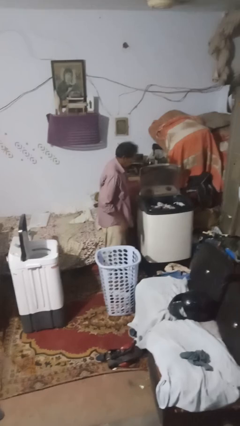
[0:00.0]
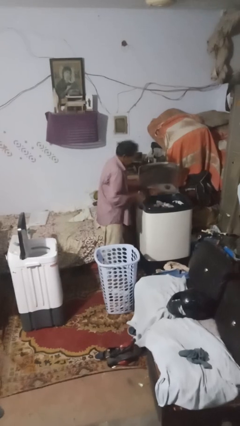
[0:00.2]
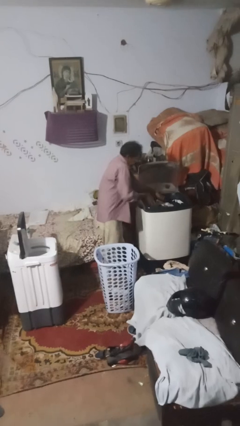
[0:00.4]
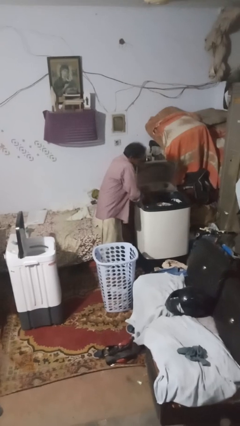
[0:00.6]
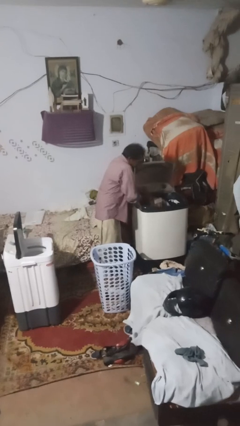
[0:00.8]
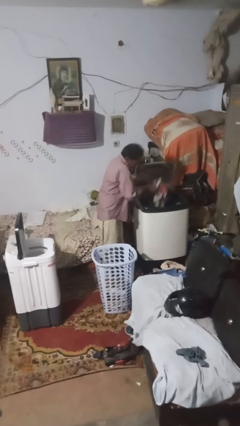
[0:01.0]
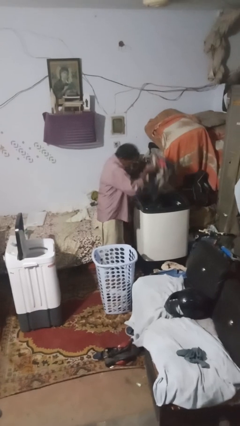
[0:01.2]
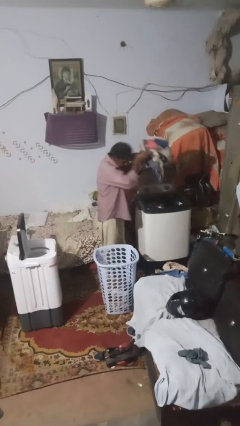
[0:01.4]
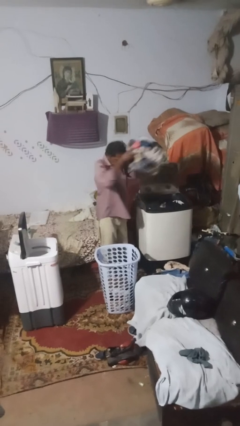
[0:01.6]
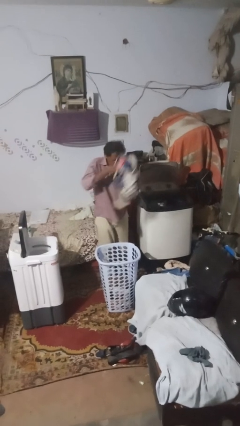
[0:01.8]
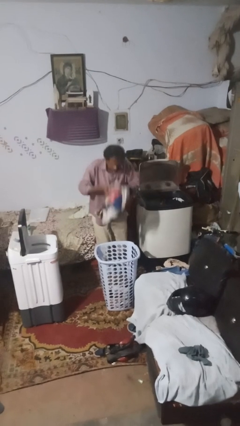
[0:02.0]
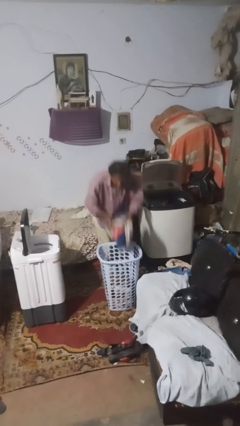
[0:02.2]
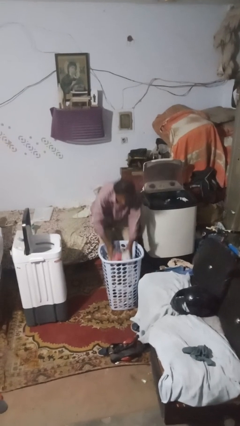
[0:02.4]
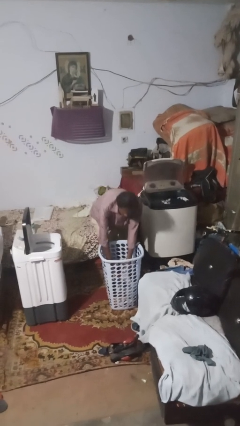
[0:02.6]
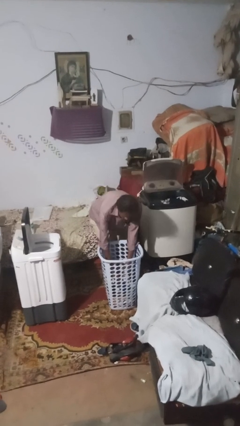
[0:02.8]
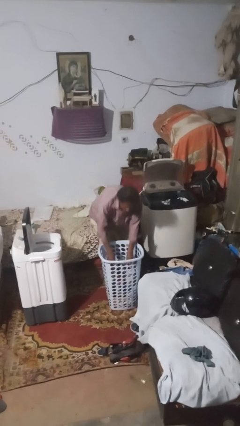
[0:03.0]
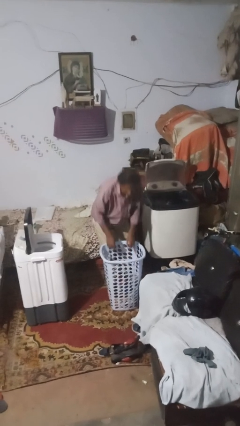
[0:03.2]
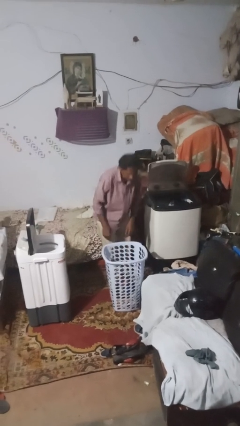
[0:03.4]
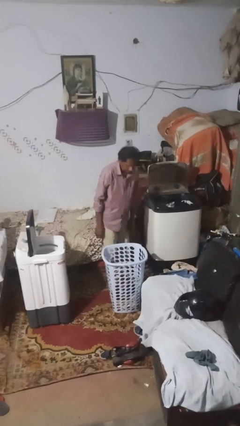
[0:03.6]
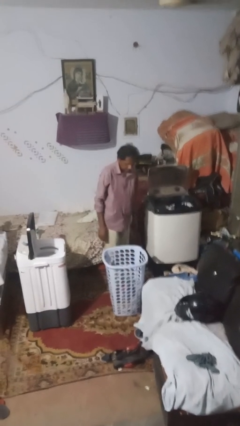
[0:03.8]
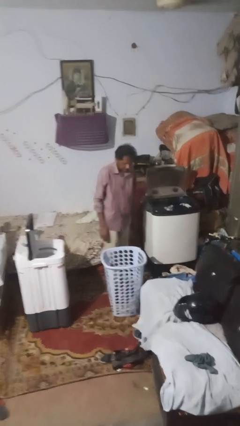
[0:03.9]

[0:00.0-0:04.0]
person unloads clotheswasher

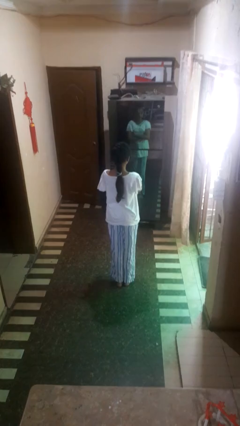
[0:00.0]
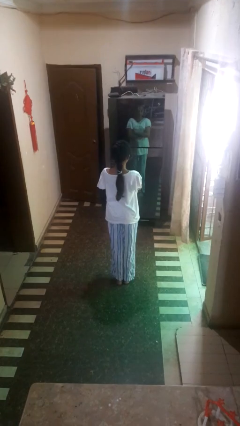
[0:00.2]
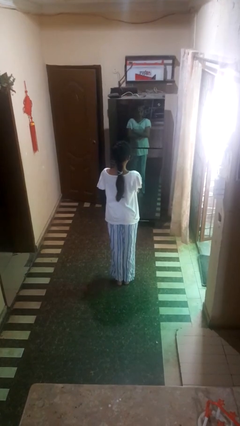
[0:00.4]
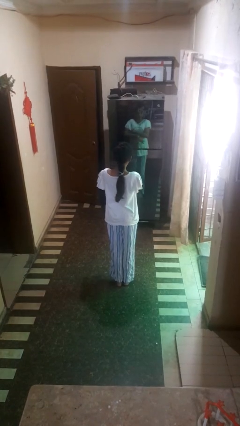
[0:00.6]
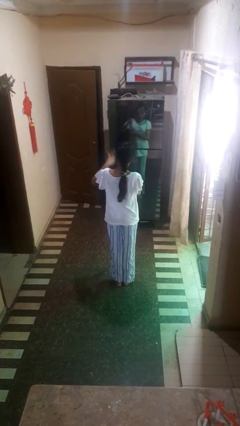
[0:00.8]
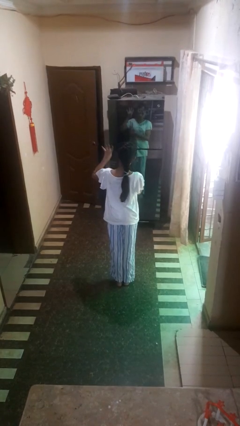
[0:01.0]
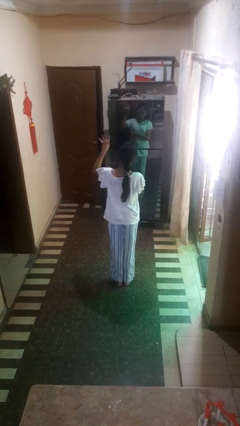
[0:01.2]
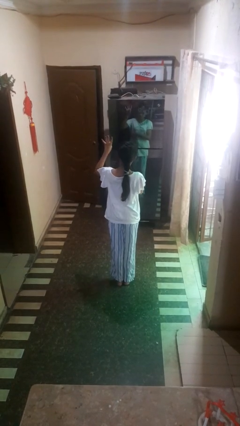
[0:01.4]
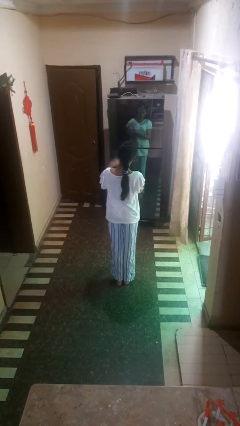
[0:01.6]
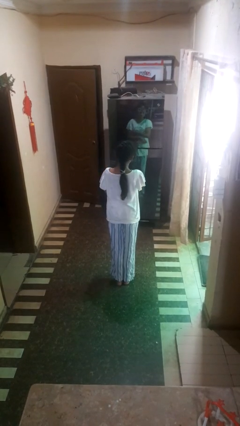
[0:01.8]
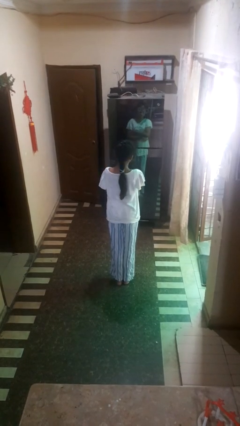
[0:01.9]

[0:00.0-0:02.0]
person gestures number four

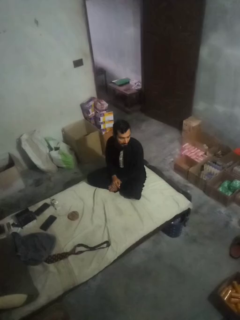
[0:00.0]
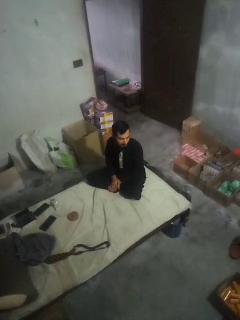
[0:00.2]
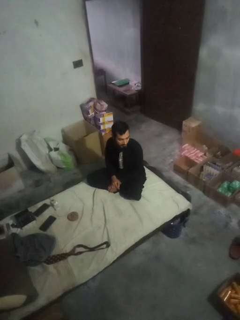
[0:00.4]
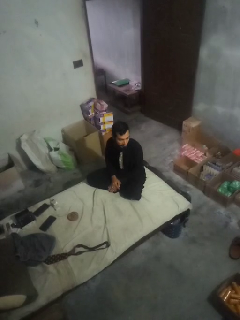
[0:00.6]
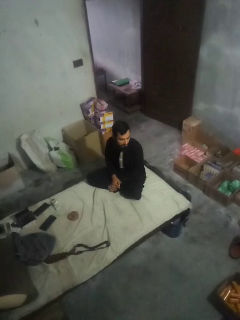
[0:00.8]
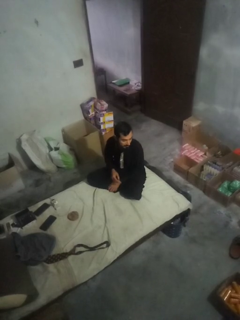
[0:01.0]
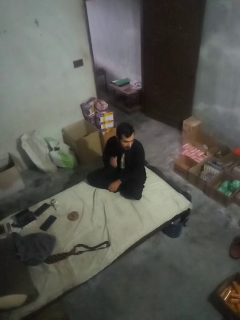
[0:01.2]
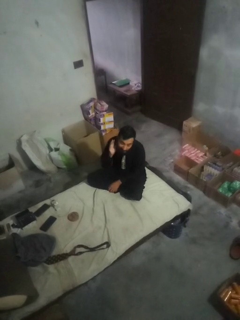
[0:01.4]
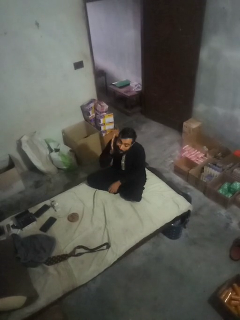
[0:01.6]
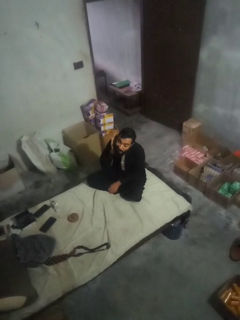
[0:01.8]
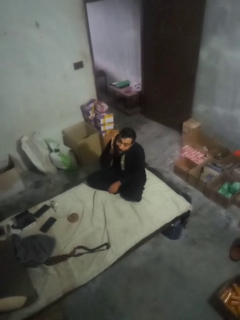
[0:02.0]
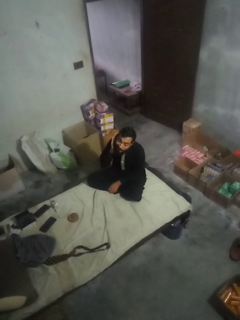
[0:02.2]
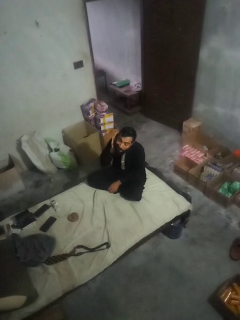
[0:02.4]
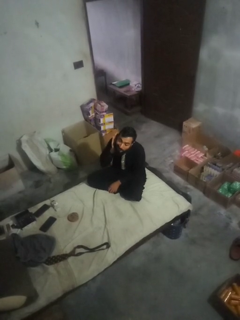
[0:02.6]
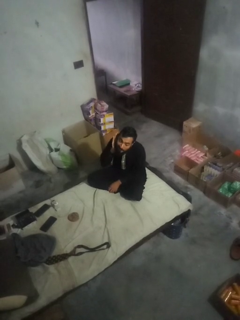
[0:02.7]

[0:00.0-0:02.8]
person gestures listen closely

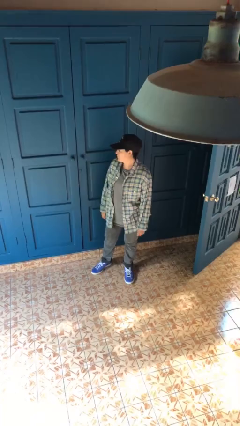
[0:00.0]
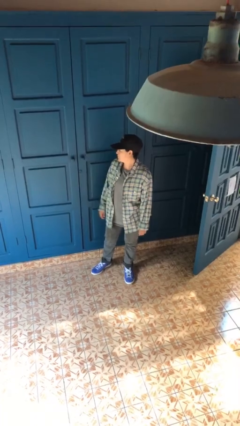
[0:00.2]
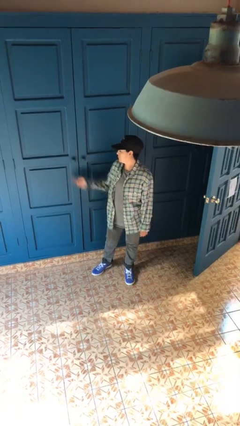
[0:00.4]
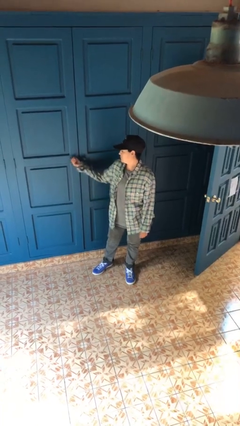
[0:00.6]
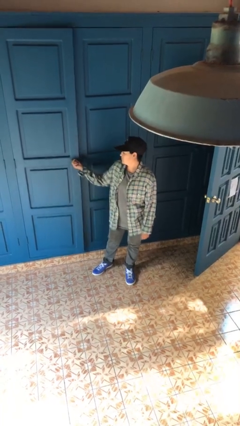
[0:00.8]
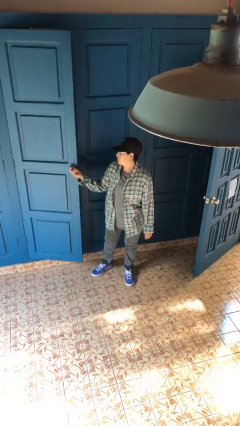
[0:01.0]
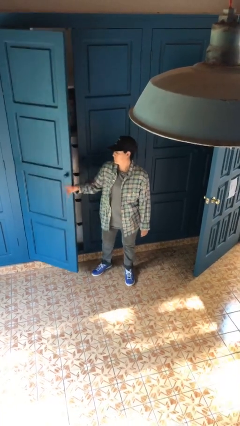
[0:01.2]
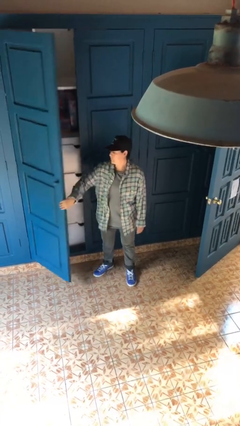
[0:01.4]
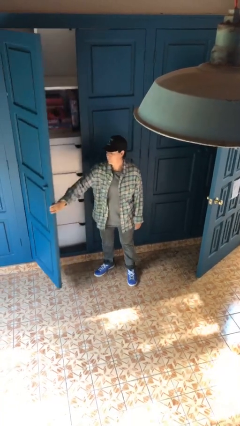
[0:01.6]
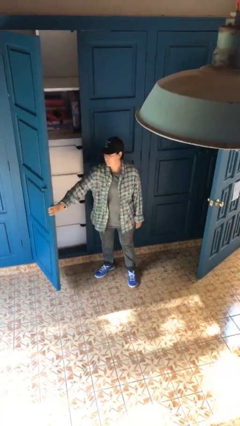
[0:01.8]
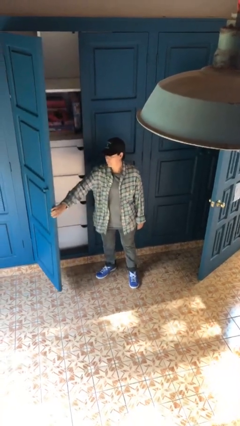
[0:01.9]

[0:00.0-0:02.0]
person opens closet door

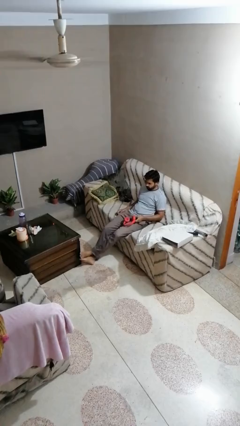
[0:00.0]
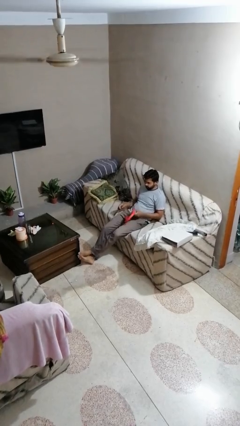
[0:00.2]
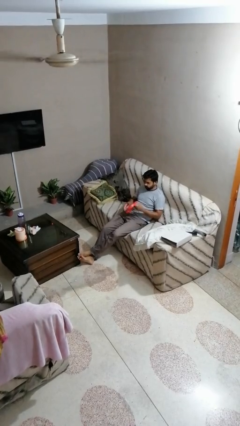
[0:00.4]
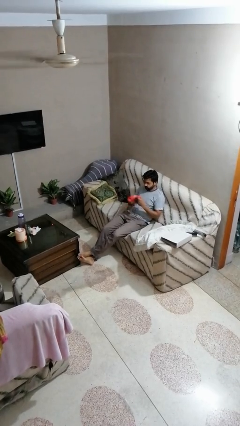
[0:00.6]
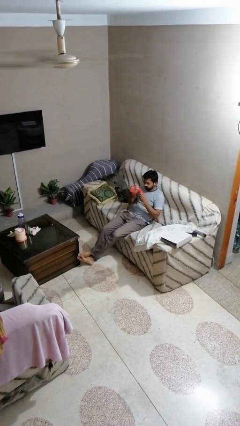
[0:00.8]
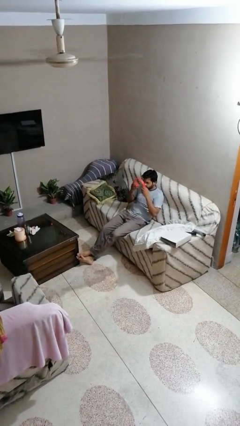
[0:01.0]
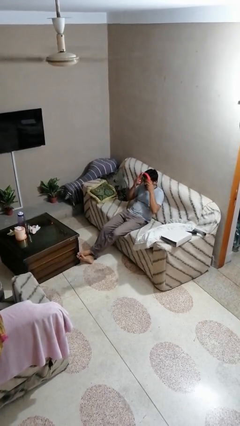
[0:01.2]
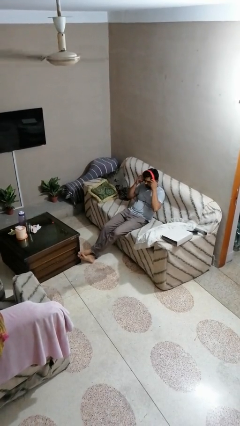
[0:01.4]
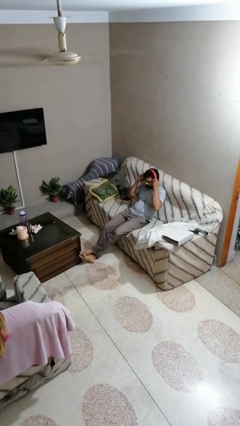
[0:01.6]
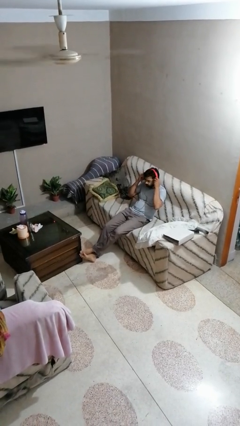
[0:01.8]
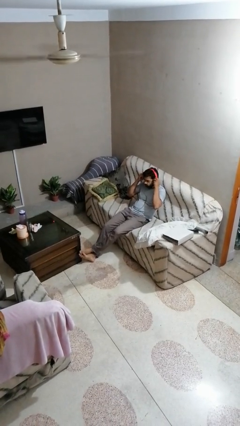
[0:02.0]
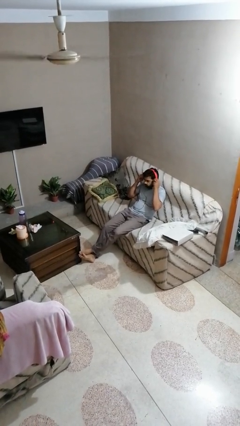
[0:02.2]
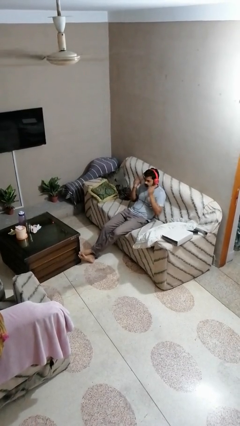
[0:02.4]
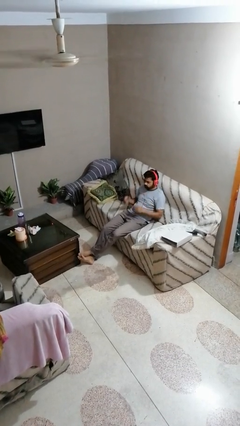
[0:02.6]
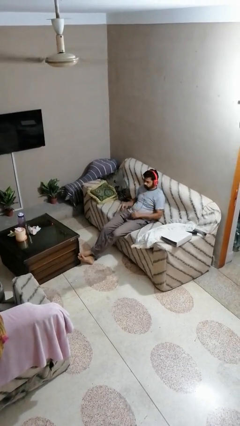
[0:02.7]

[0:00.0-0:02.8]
person puts on headphones

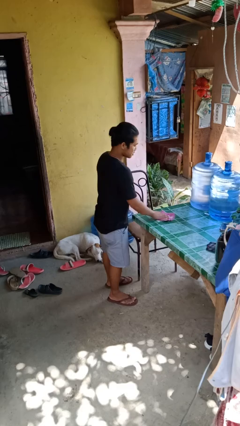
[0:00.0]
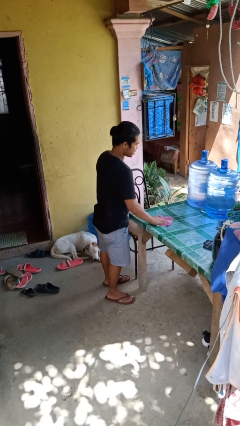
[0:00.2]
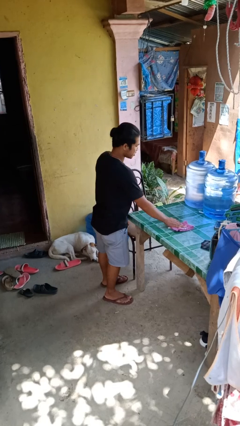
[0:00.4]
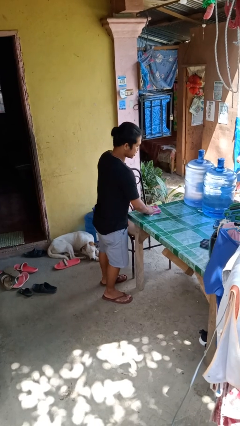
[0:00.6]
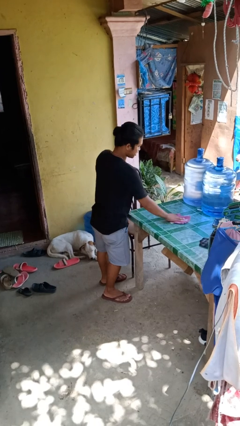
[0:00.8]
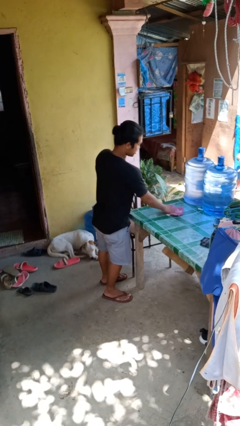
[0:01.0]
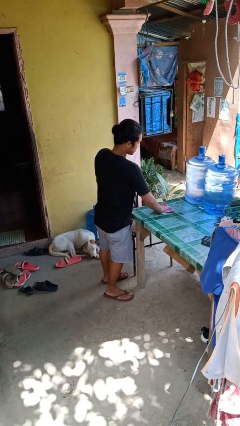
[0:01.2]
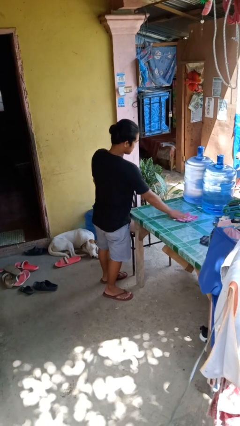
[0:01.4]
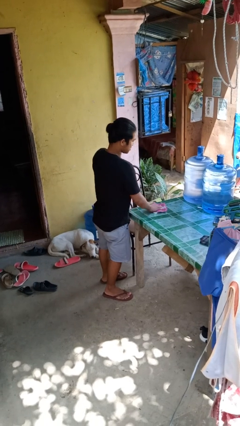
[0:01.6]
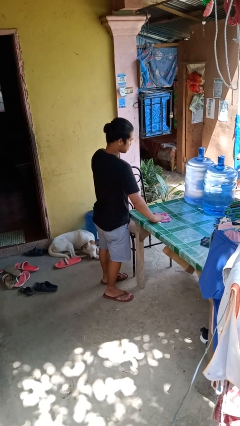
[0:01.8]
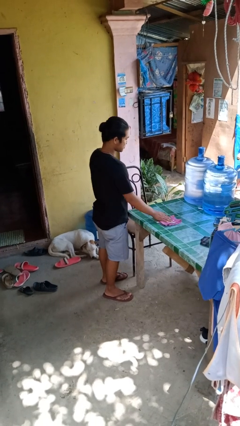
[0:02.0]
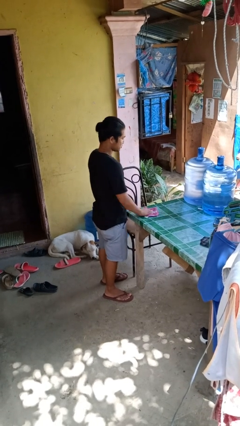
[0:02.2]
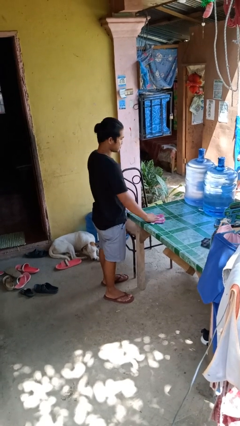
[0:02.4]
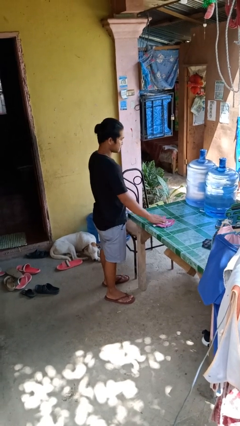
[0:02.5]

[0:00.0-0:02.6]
person cleans table with rag

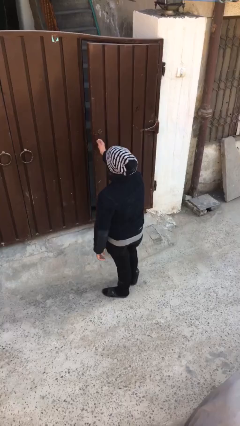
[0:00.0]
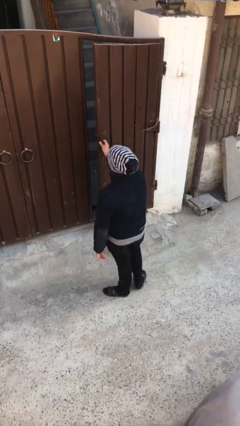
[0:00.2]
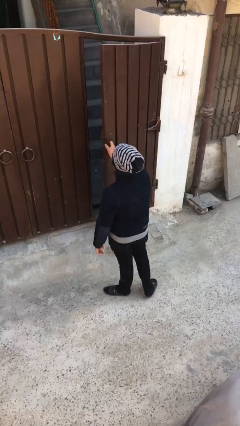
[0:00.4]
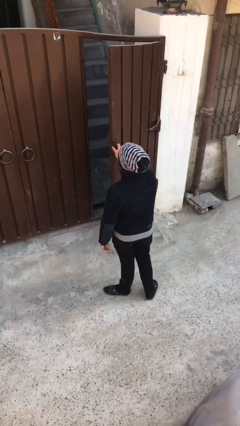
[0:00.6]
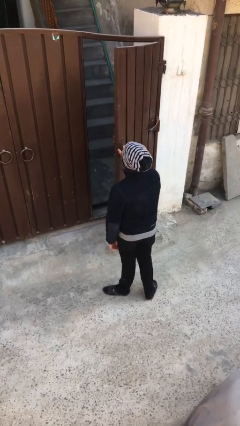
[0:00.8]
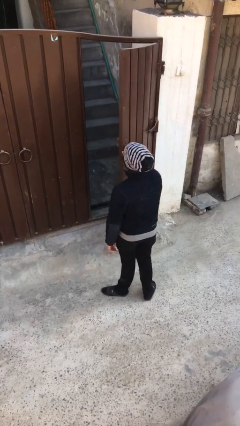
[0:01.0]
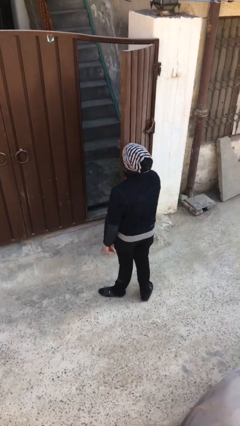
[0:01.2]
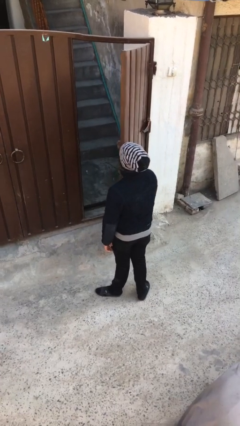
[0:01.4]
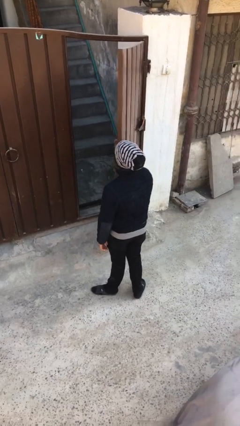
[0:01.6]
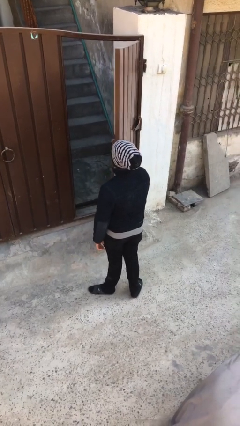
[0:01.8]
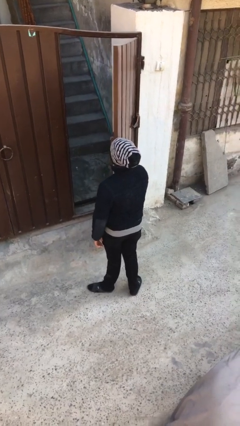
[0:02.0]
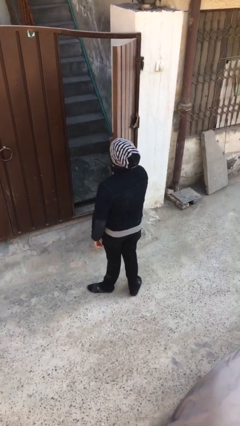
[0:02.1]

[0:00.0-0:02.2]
person opens facility door
